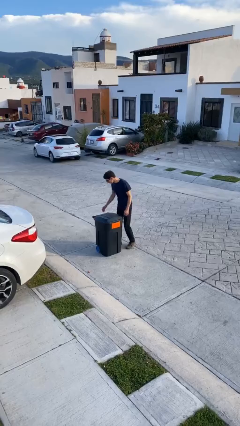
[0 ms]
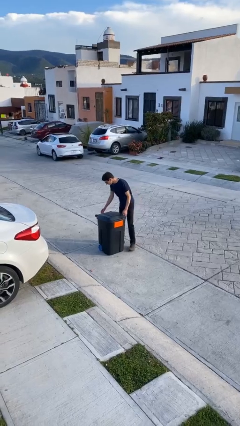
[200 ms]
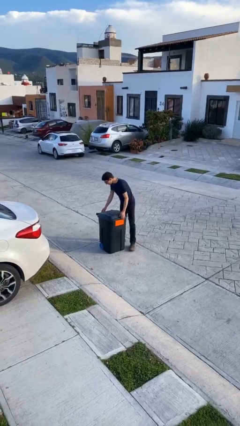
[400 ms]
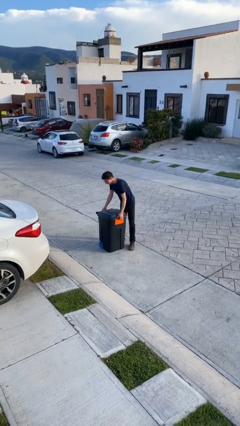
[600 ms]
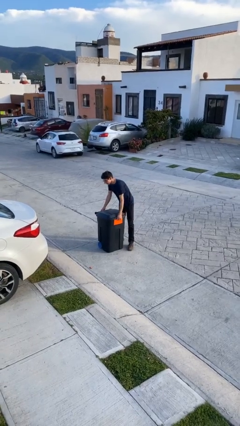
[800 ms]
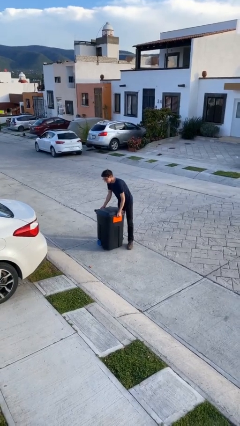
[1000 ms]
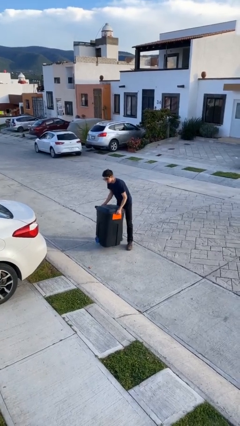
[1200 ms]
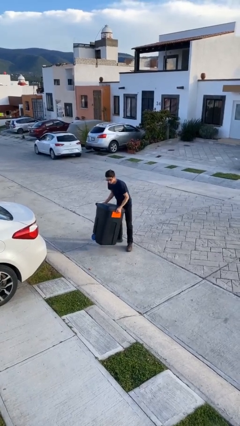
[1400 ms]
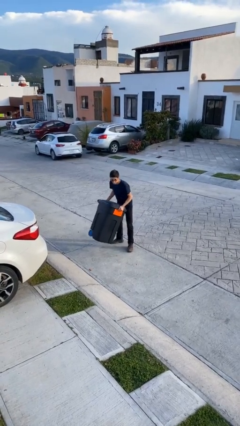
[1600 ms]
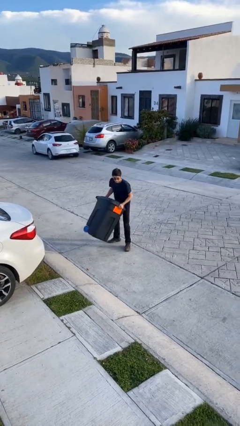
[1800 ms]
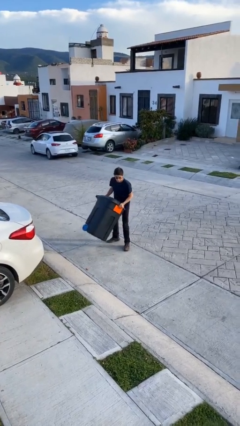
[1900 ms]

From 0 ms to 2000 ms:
person picks up object from floor

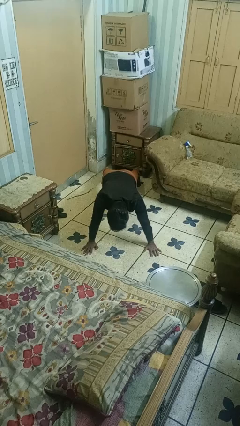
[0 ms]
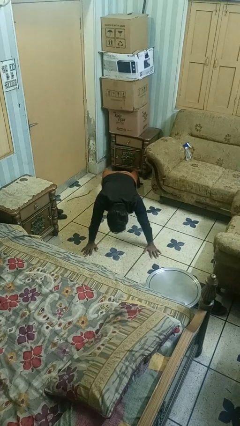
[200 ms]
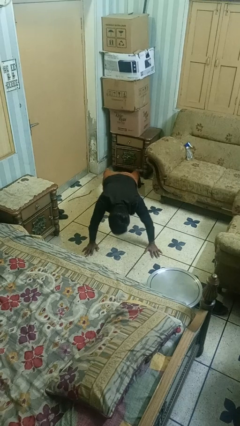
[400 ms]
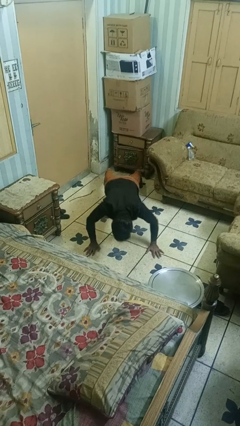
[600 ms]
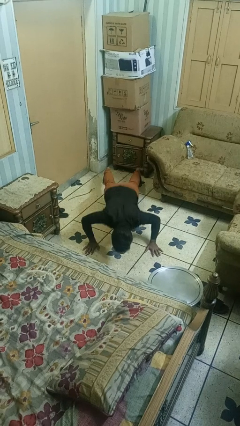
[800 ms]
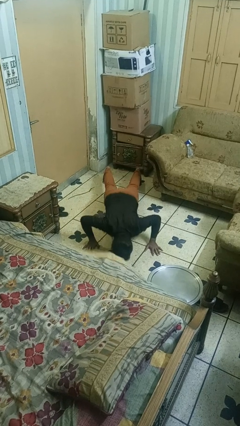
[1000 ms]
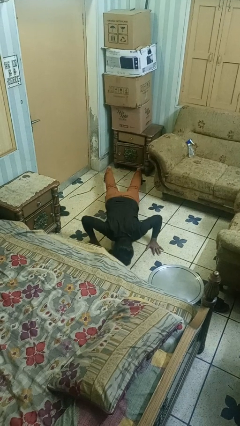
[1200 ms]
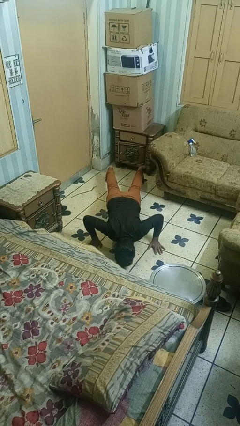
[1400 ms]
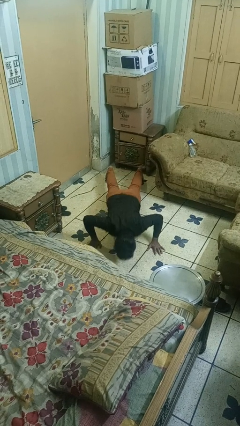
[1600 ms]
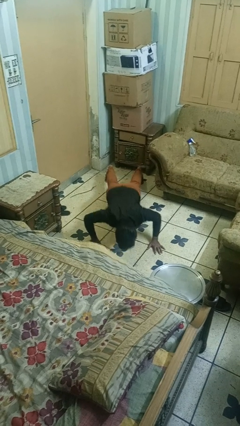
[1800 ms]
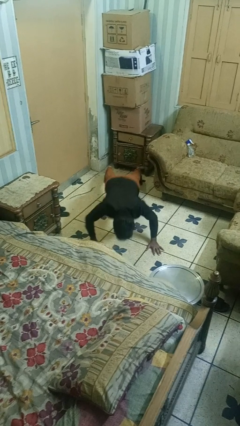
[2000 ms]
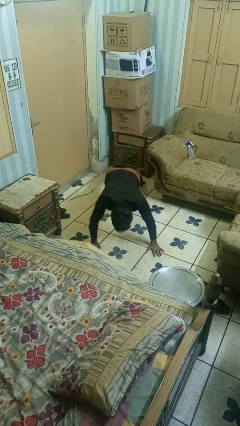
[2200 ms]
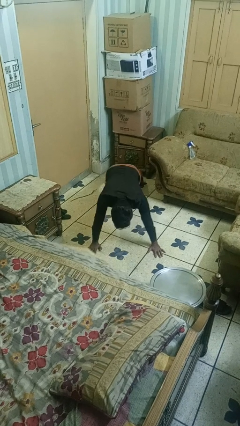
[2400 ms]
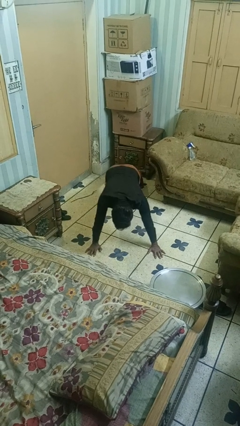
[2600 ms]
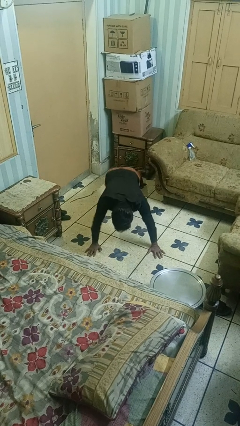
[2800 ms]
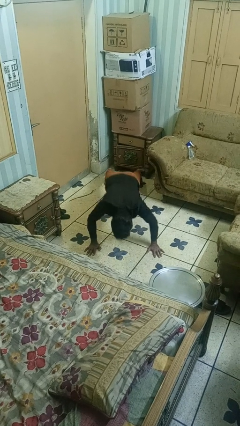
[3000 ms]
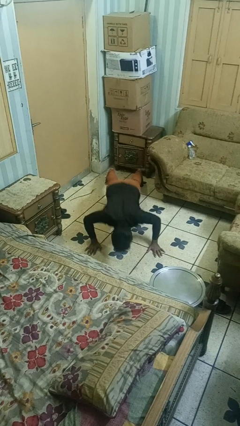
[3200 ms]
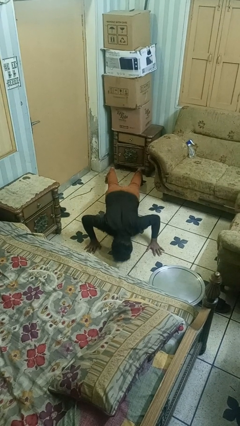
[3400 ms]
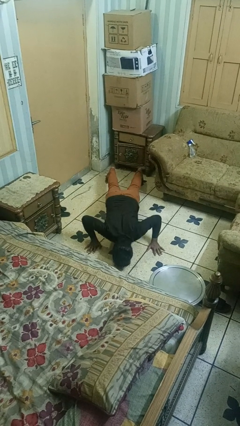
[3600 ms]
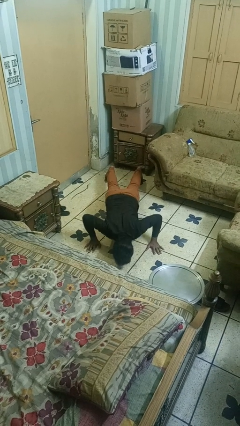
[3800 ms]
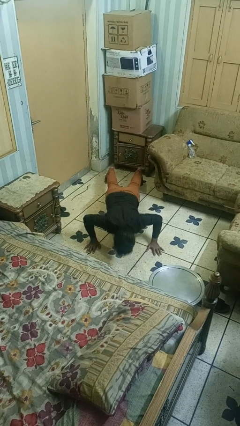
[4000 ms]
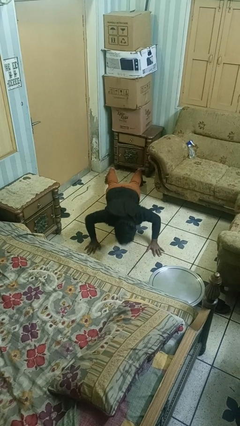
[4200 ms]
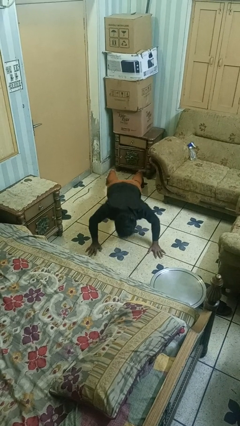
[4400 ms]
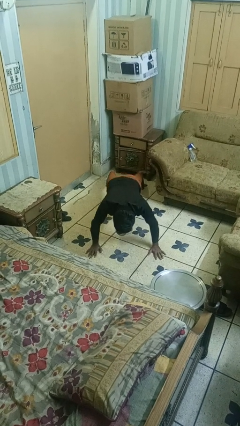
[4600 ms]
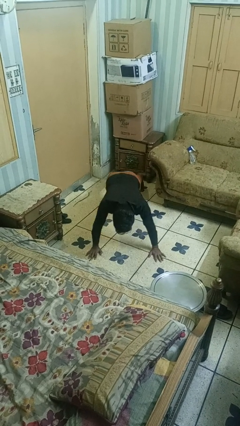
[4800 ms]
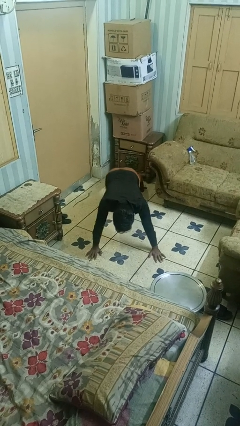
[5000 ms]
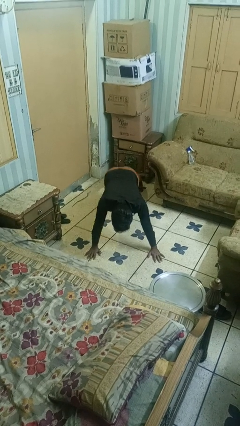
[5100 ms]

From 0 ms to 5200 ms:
person exercises with pushup

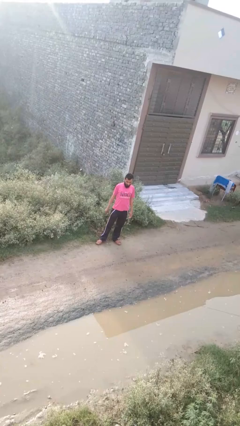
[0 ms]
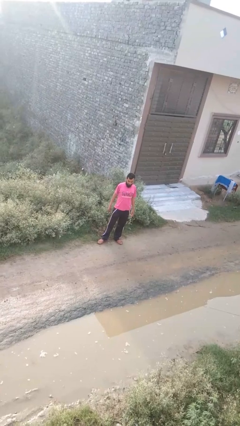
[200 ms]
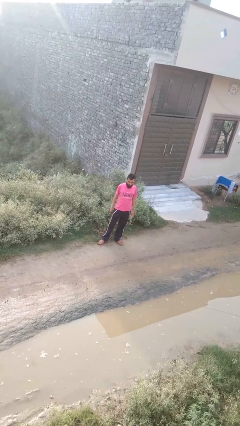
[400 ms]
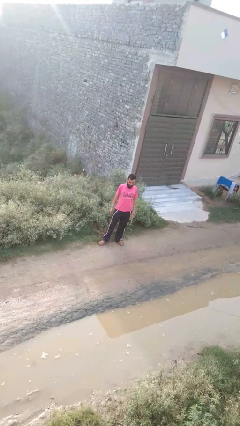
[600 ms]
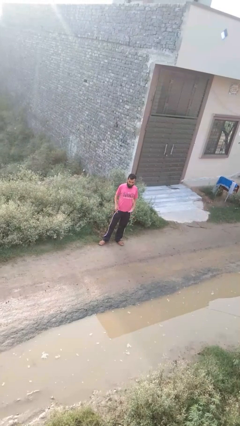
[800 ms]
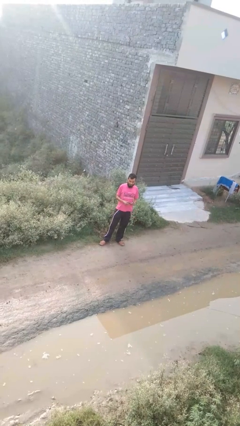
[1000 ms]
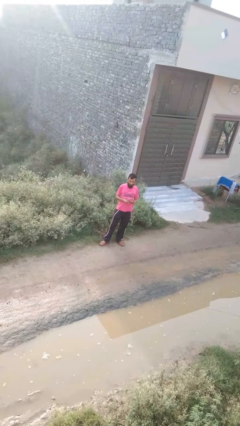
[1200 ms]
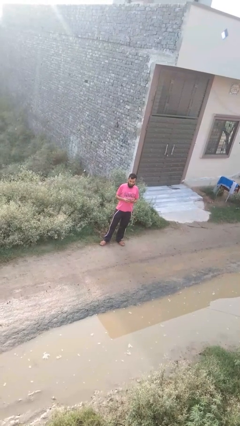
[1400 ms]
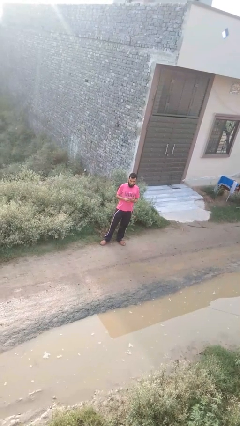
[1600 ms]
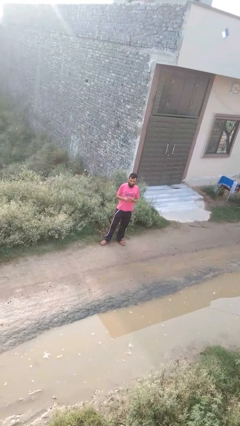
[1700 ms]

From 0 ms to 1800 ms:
person takes off ring

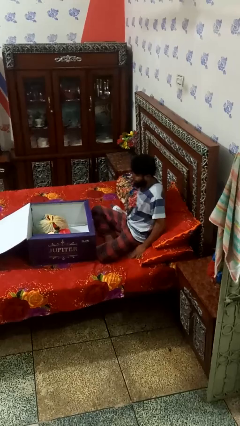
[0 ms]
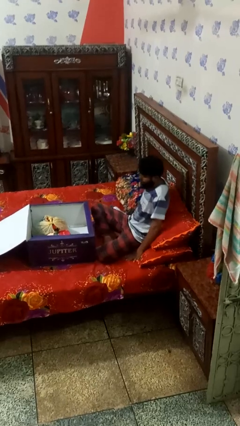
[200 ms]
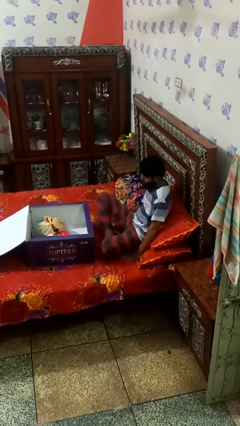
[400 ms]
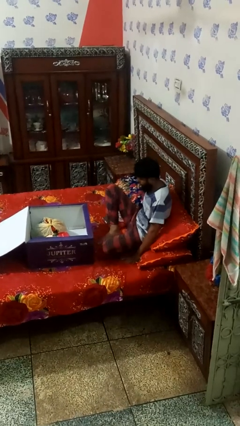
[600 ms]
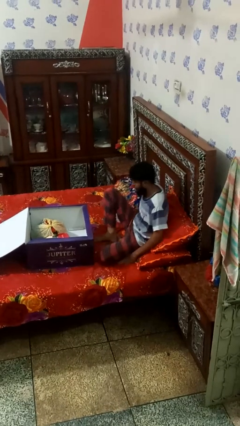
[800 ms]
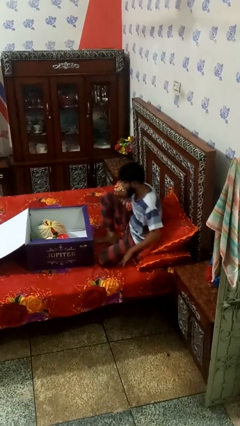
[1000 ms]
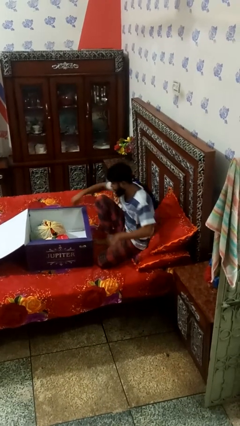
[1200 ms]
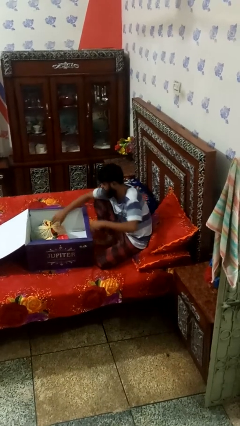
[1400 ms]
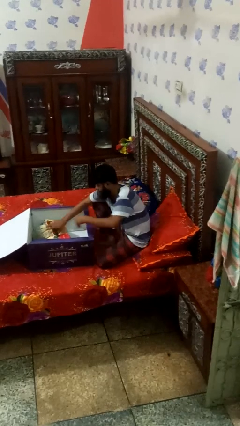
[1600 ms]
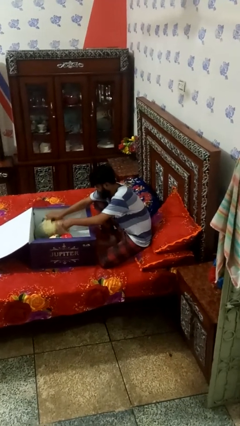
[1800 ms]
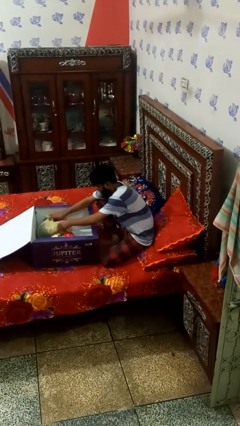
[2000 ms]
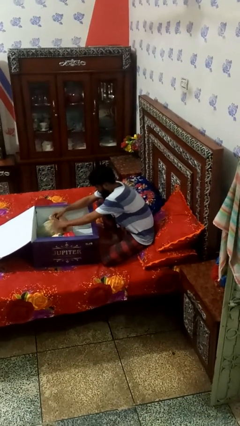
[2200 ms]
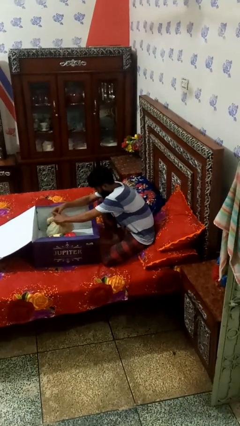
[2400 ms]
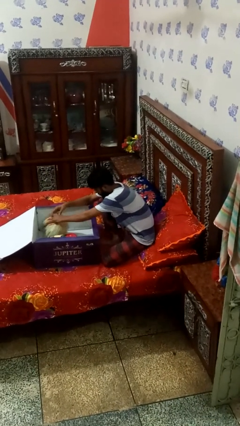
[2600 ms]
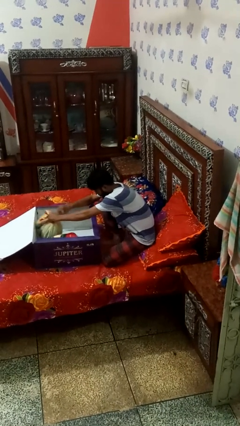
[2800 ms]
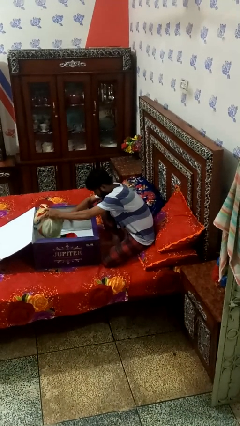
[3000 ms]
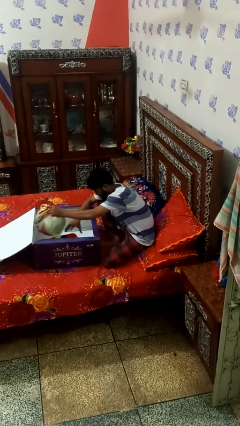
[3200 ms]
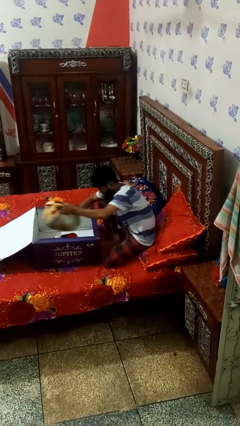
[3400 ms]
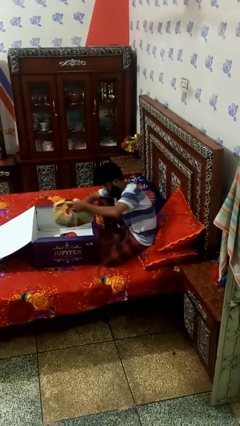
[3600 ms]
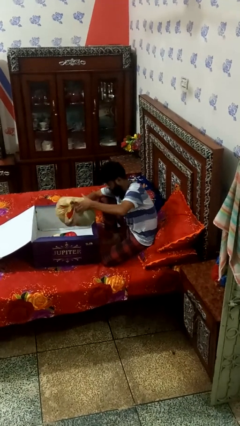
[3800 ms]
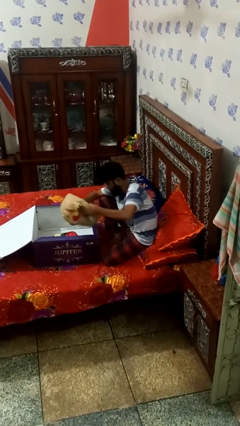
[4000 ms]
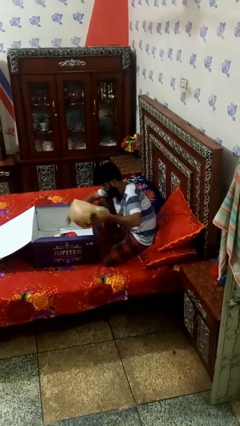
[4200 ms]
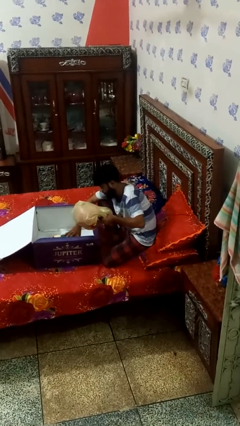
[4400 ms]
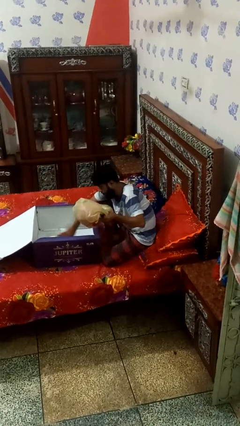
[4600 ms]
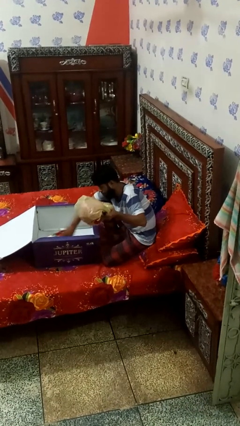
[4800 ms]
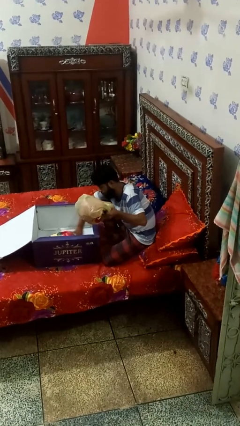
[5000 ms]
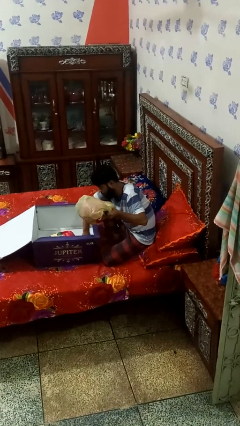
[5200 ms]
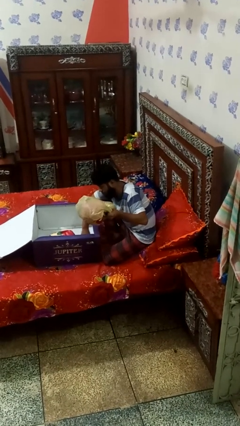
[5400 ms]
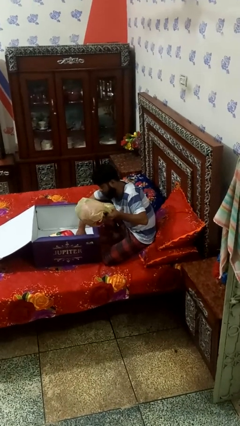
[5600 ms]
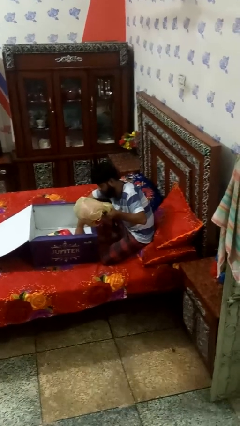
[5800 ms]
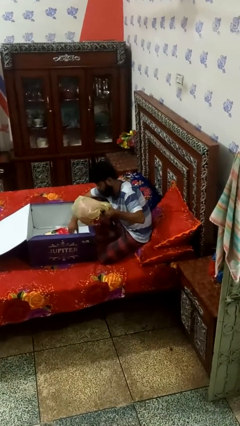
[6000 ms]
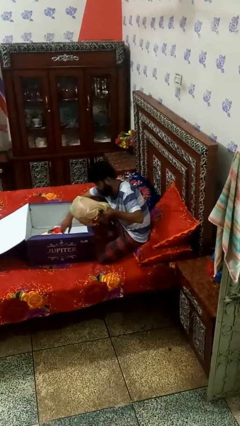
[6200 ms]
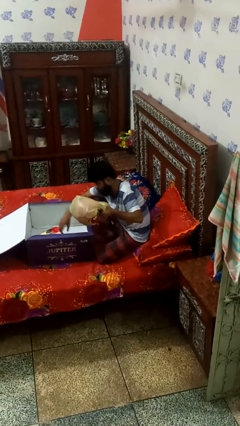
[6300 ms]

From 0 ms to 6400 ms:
person takes object from box

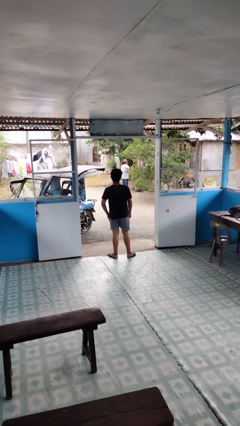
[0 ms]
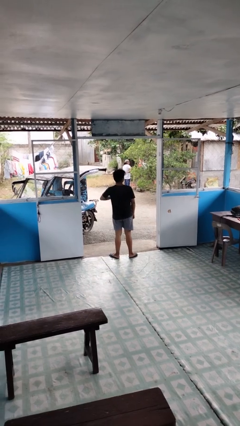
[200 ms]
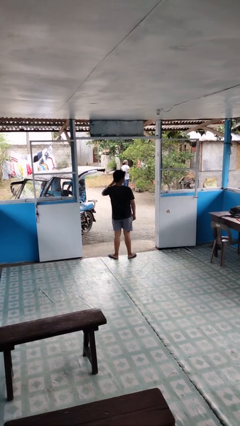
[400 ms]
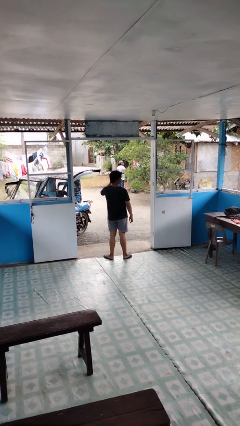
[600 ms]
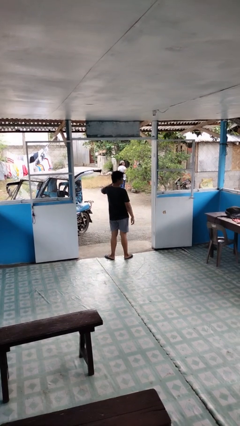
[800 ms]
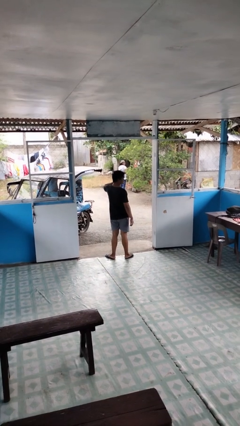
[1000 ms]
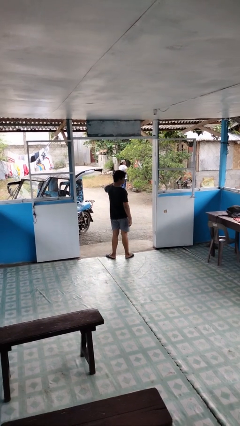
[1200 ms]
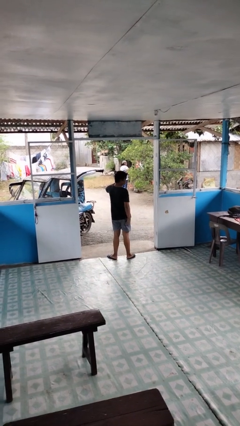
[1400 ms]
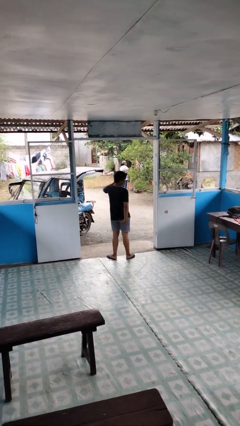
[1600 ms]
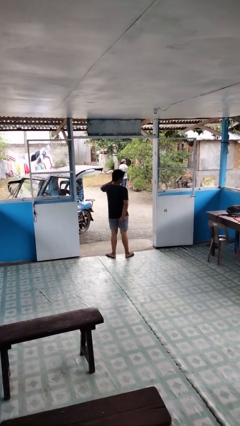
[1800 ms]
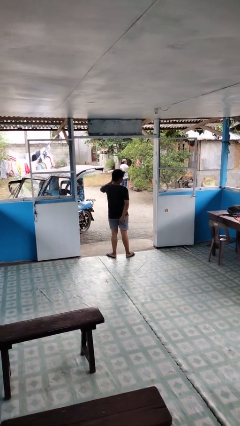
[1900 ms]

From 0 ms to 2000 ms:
person touches earlobe

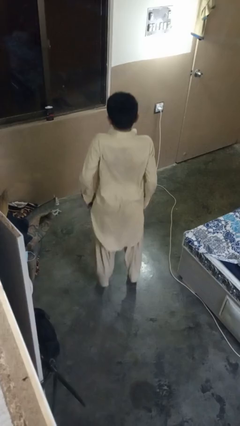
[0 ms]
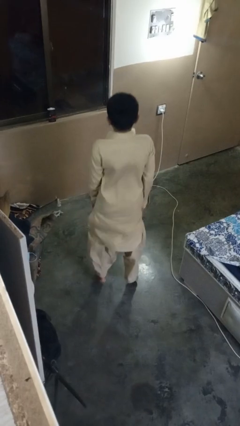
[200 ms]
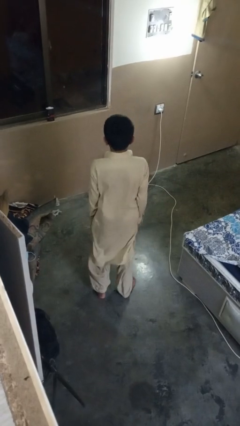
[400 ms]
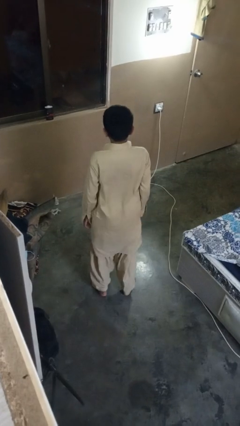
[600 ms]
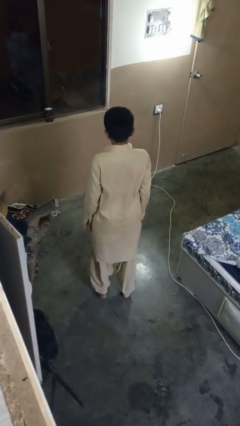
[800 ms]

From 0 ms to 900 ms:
person jumps
